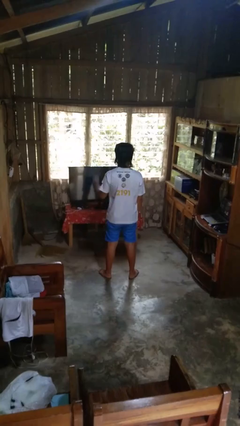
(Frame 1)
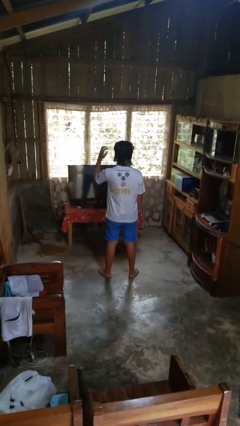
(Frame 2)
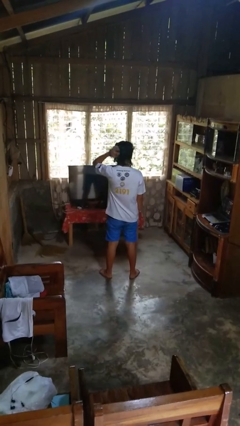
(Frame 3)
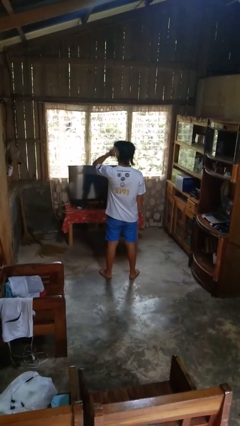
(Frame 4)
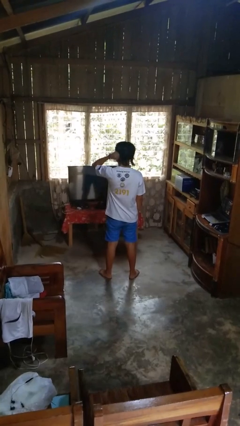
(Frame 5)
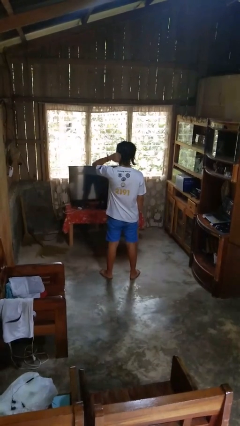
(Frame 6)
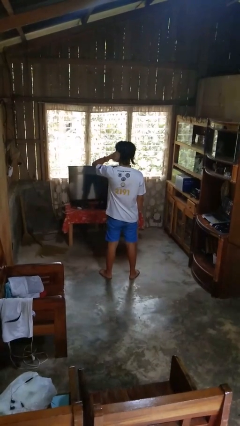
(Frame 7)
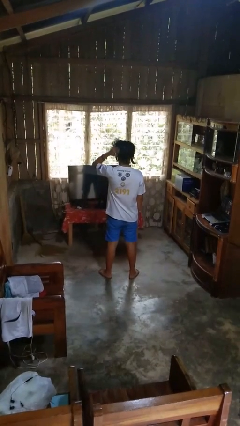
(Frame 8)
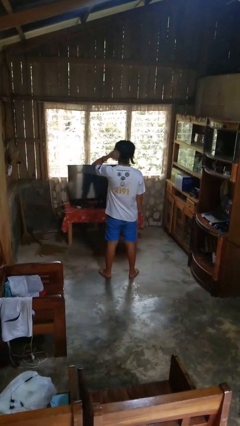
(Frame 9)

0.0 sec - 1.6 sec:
person scratches face

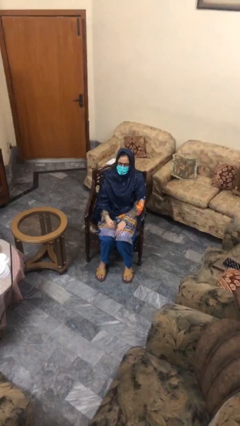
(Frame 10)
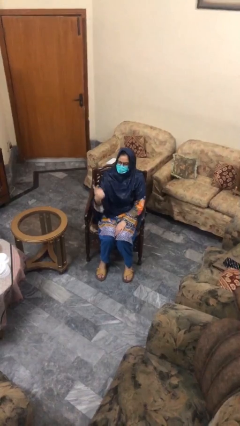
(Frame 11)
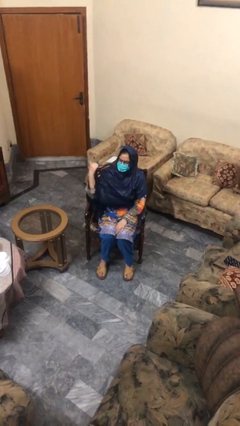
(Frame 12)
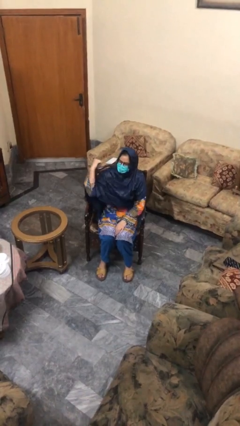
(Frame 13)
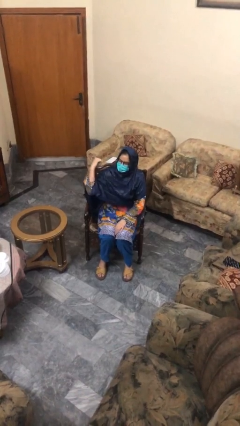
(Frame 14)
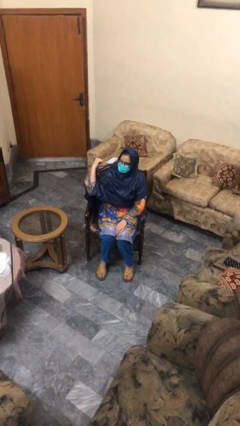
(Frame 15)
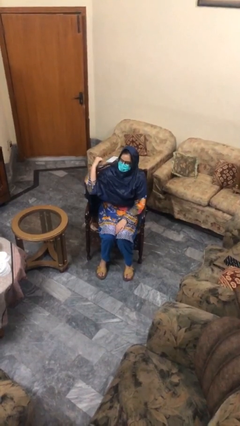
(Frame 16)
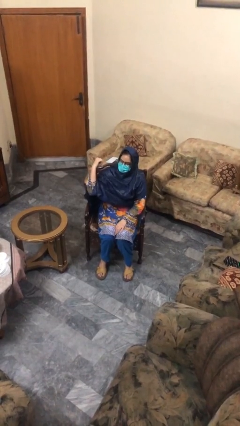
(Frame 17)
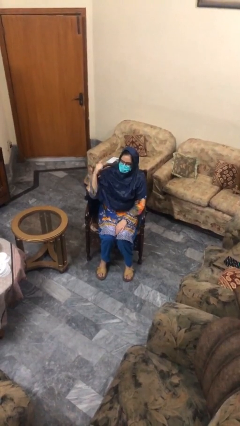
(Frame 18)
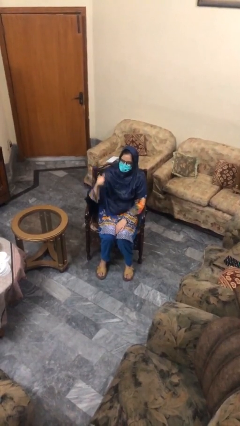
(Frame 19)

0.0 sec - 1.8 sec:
person gestures behind me

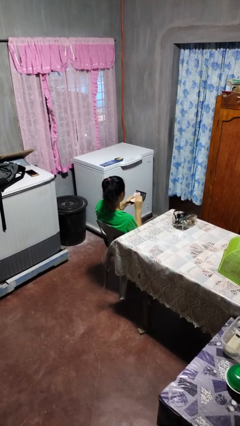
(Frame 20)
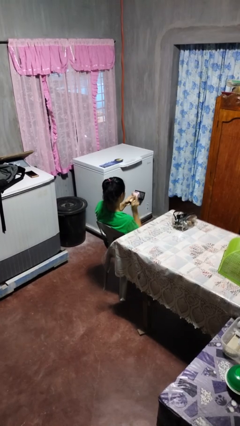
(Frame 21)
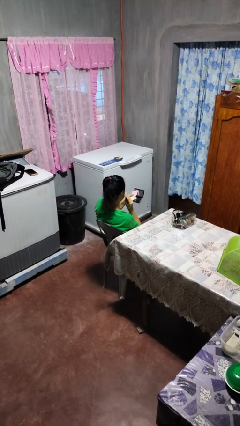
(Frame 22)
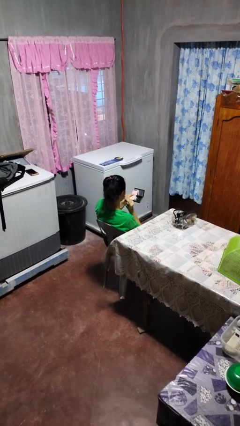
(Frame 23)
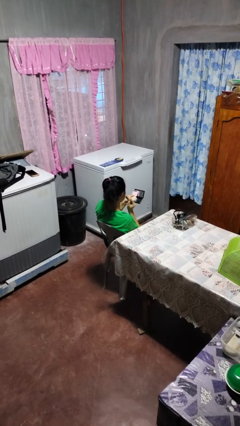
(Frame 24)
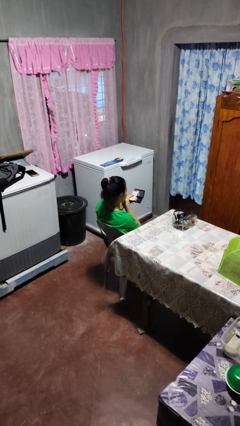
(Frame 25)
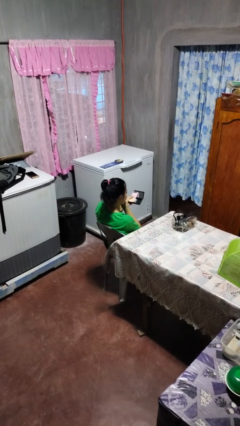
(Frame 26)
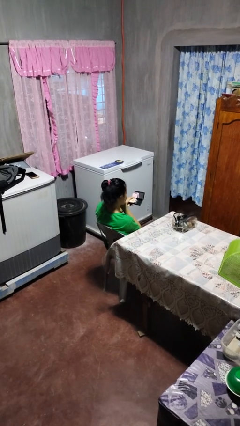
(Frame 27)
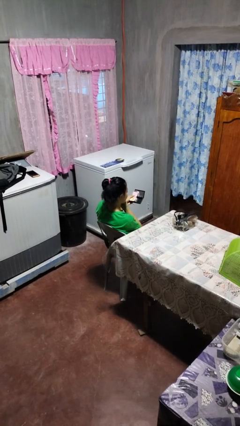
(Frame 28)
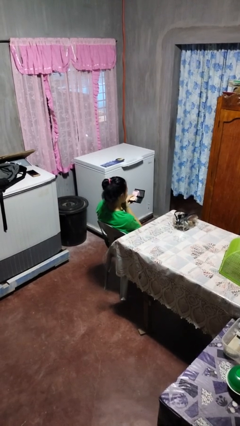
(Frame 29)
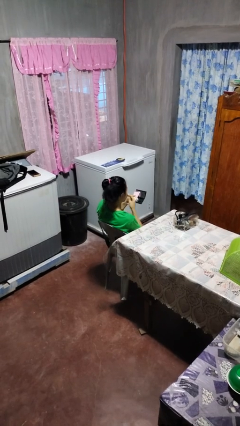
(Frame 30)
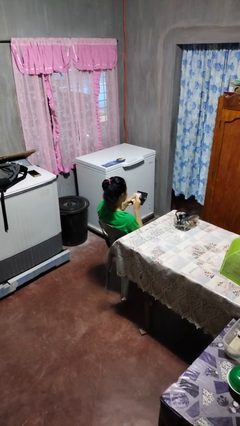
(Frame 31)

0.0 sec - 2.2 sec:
person applies foundation makeup

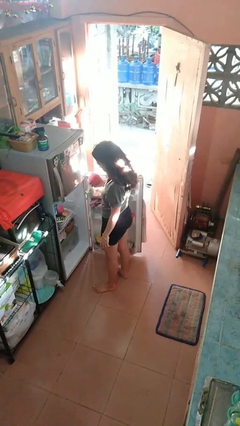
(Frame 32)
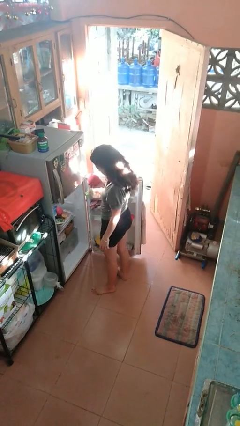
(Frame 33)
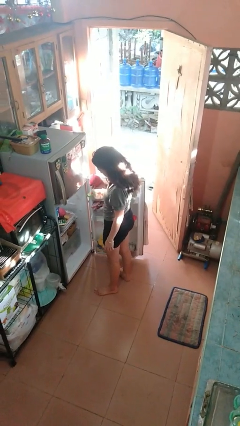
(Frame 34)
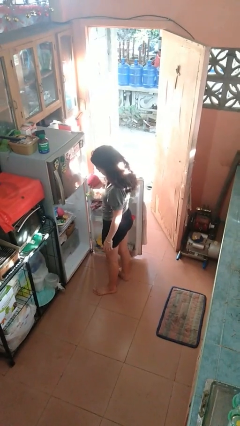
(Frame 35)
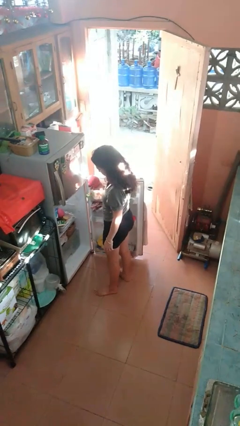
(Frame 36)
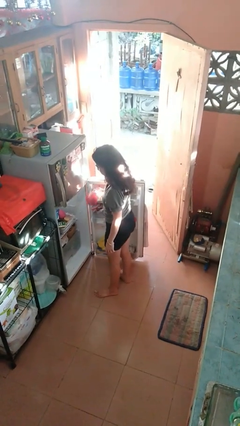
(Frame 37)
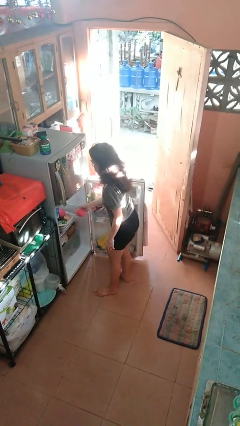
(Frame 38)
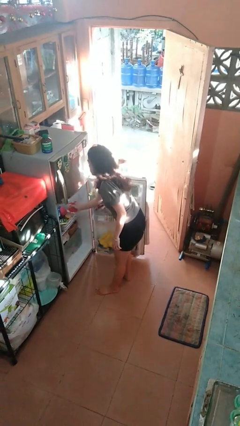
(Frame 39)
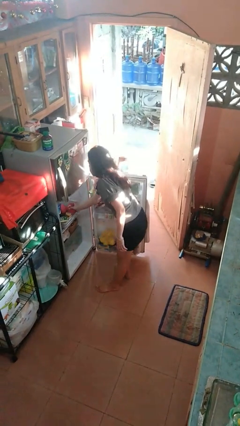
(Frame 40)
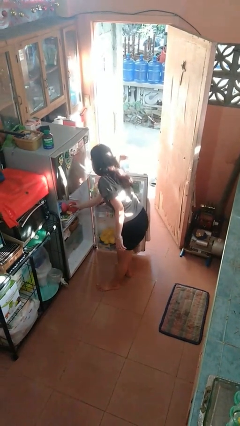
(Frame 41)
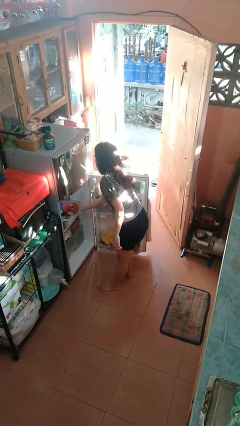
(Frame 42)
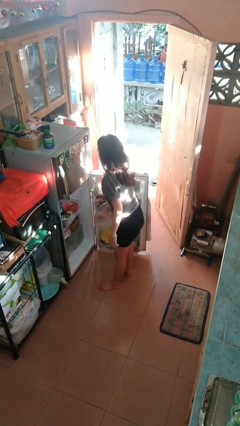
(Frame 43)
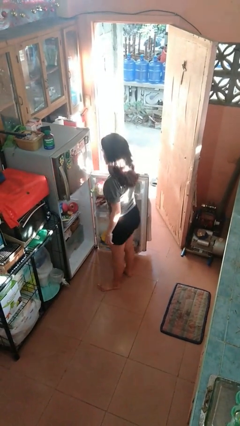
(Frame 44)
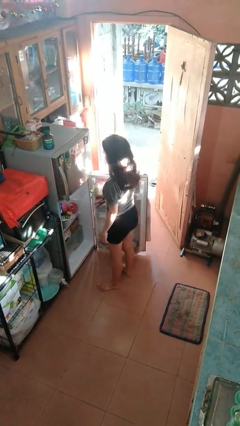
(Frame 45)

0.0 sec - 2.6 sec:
person puts object into refrigerator

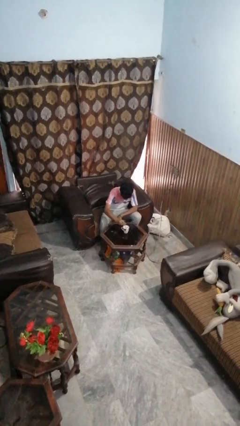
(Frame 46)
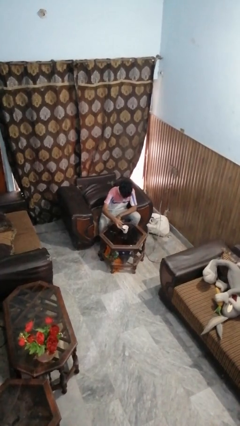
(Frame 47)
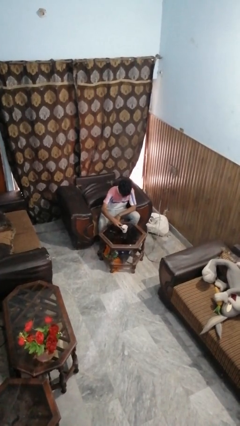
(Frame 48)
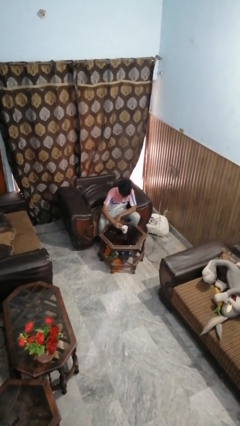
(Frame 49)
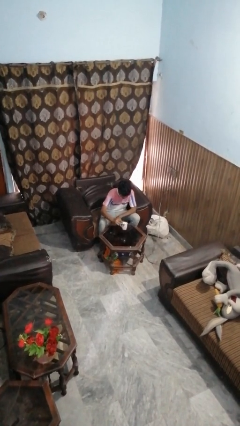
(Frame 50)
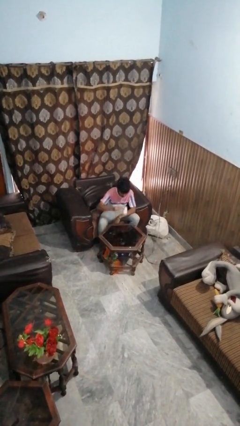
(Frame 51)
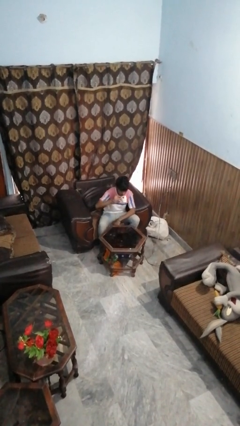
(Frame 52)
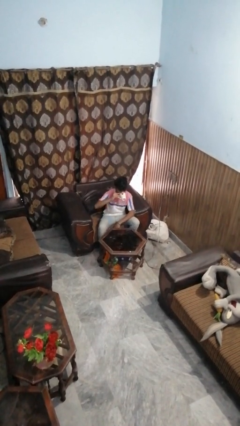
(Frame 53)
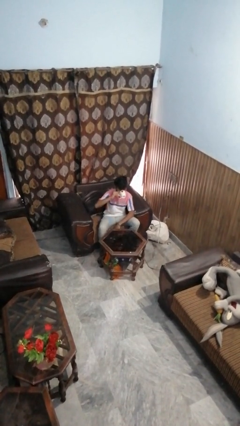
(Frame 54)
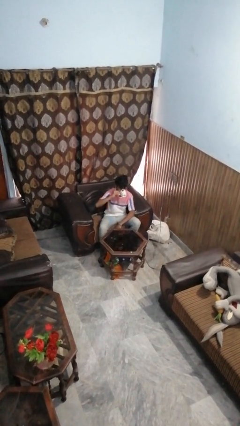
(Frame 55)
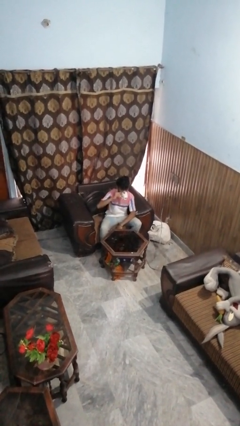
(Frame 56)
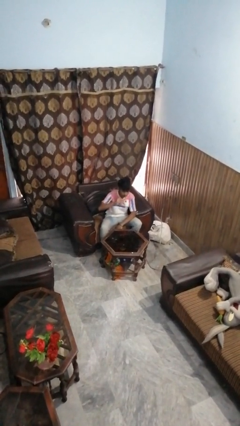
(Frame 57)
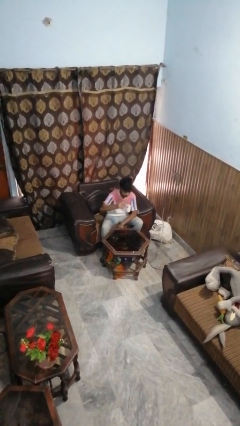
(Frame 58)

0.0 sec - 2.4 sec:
person drinks from mug

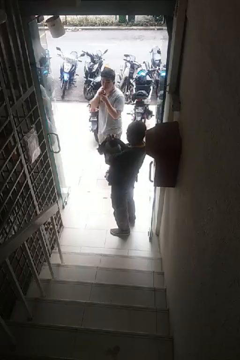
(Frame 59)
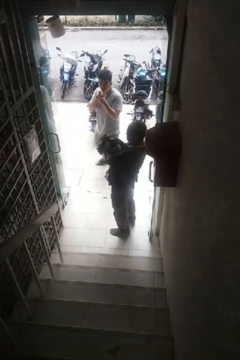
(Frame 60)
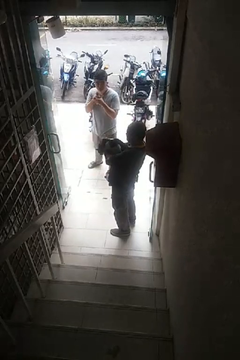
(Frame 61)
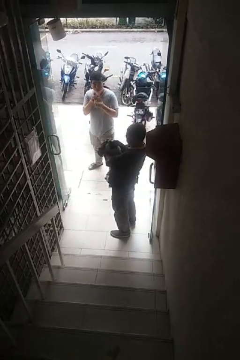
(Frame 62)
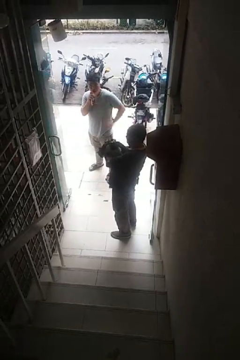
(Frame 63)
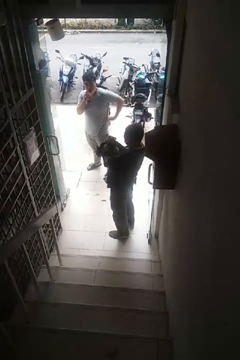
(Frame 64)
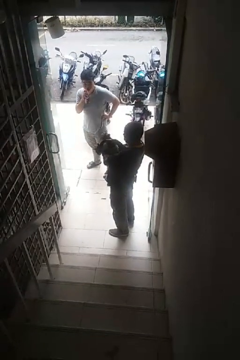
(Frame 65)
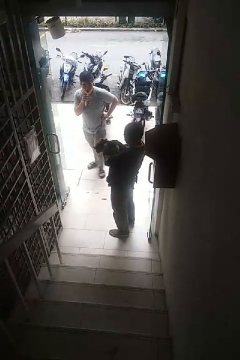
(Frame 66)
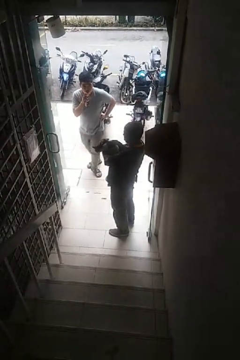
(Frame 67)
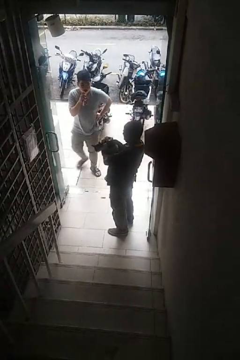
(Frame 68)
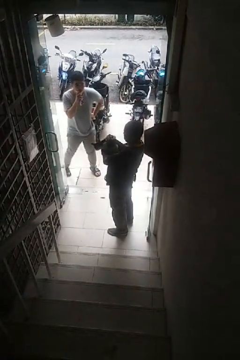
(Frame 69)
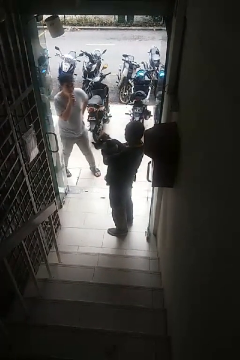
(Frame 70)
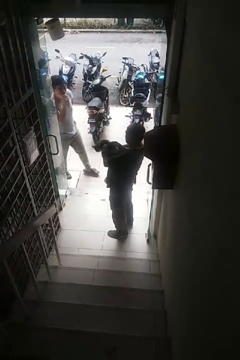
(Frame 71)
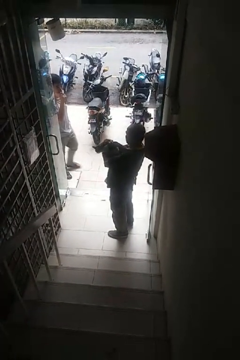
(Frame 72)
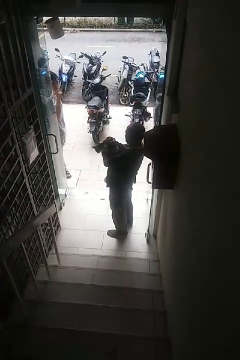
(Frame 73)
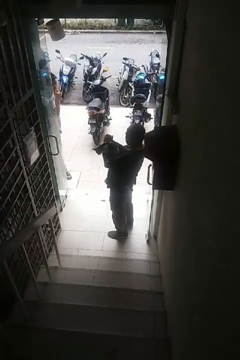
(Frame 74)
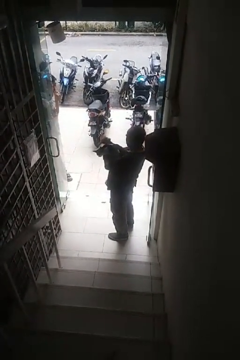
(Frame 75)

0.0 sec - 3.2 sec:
person hugs cat

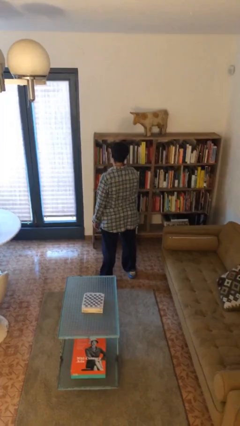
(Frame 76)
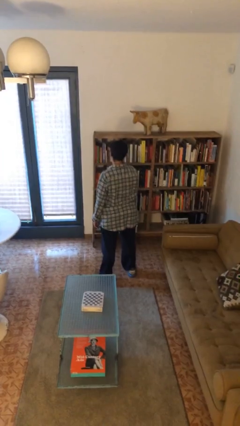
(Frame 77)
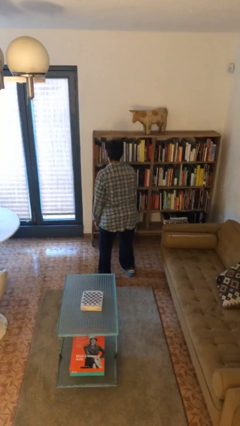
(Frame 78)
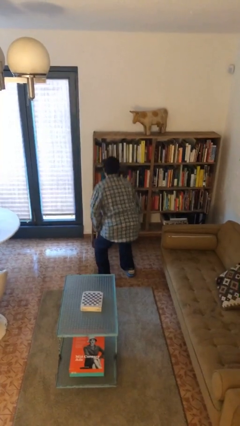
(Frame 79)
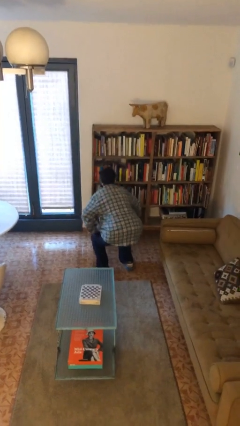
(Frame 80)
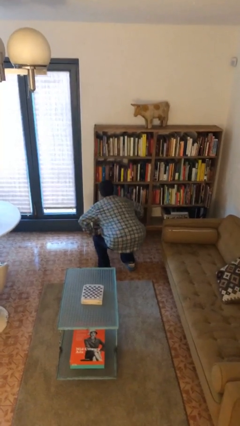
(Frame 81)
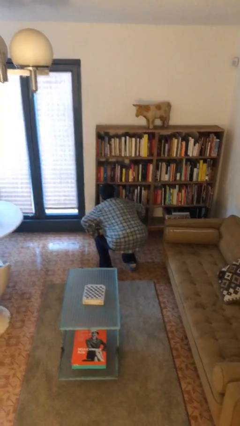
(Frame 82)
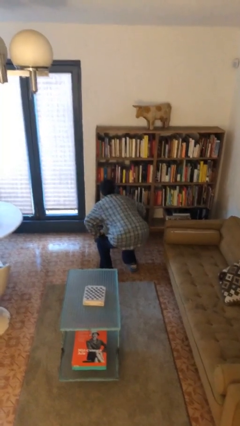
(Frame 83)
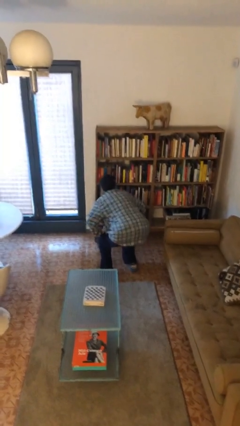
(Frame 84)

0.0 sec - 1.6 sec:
person squats

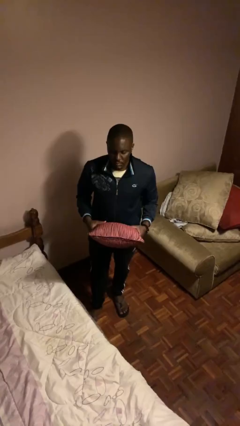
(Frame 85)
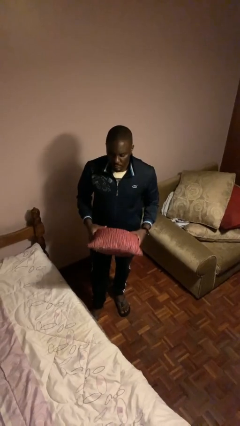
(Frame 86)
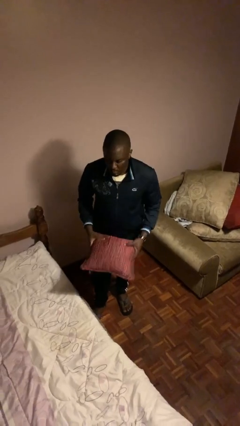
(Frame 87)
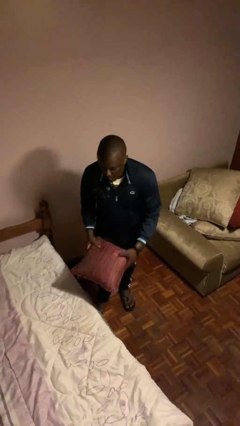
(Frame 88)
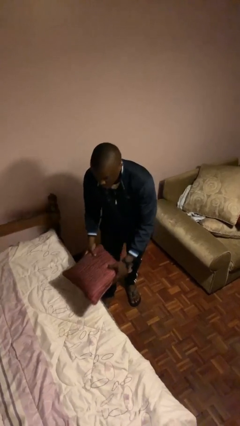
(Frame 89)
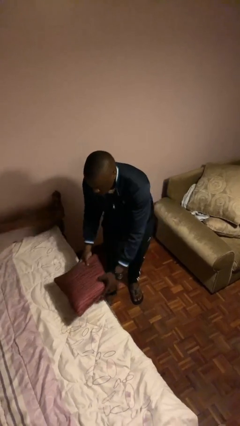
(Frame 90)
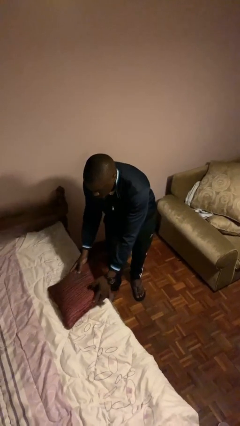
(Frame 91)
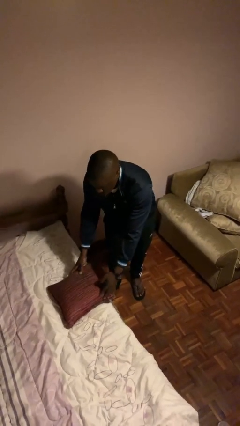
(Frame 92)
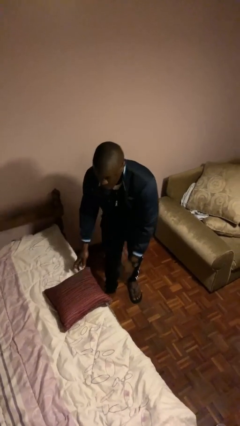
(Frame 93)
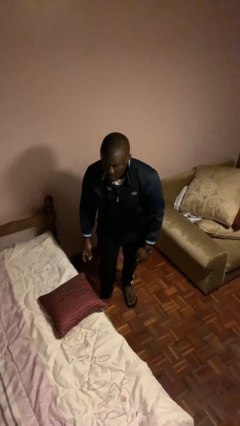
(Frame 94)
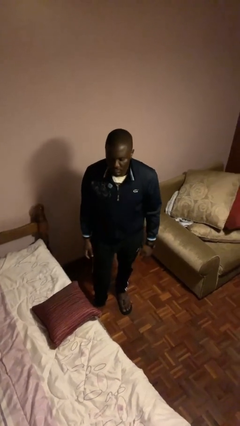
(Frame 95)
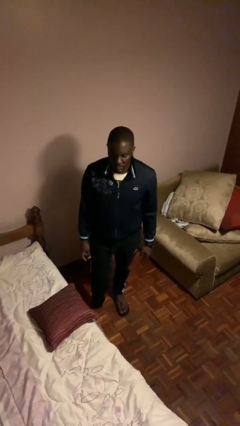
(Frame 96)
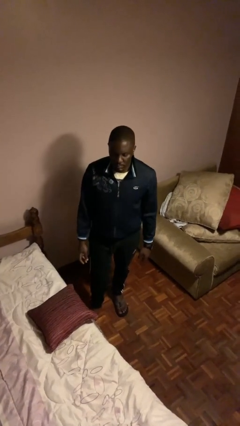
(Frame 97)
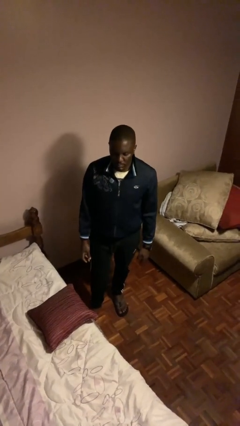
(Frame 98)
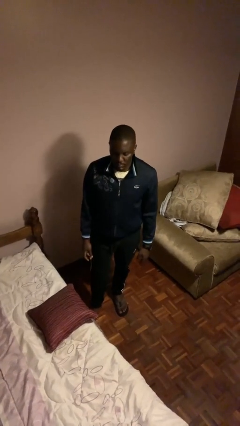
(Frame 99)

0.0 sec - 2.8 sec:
person puts down object on bed
